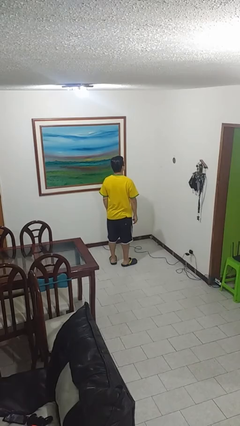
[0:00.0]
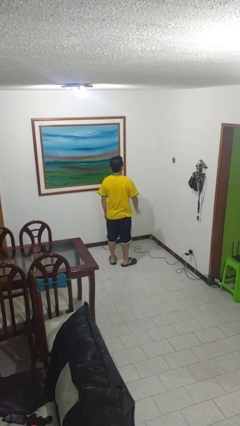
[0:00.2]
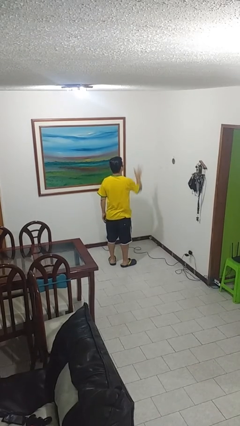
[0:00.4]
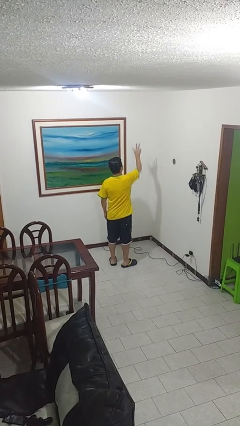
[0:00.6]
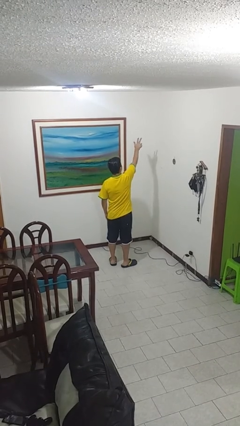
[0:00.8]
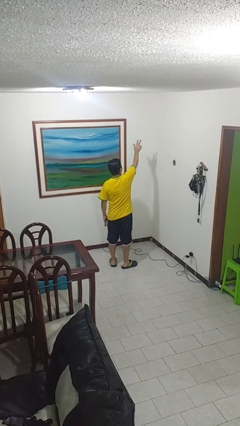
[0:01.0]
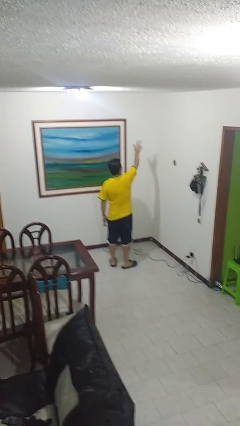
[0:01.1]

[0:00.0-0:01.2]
person gestures number three

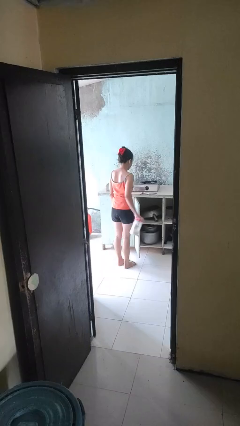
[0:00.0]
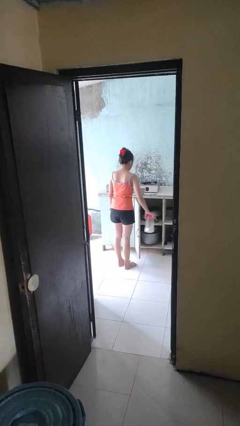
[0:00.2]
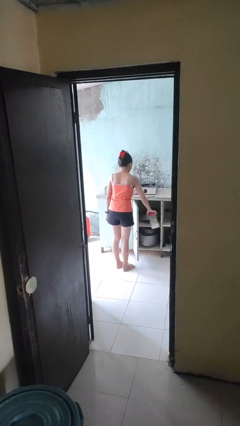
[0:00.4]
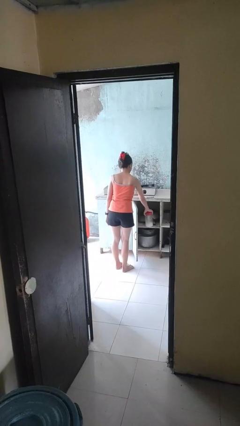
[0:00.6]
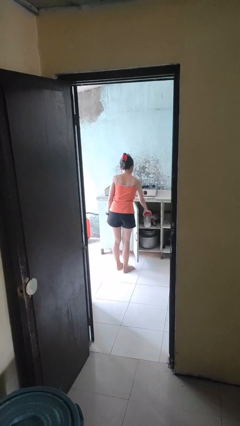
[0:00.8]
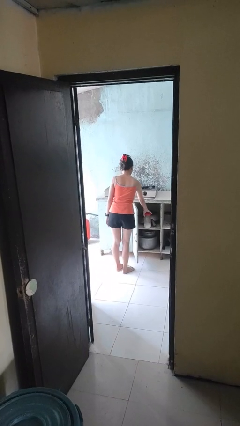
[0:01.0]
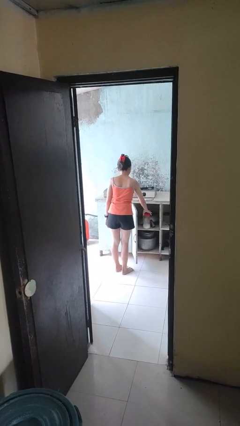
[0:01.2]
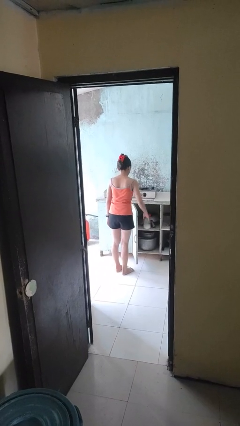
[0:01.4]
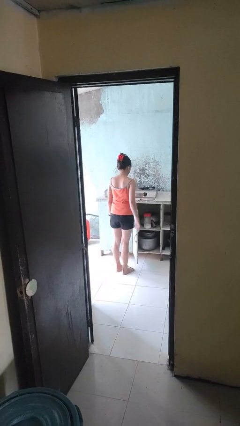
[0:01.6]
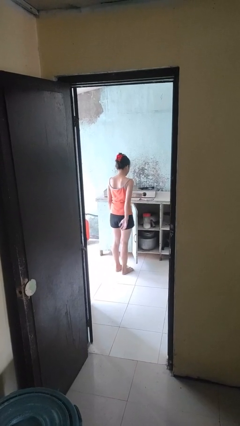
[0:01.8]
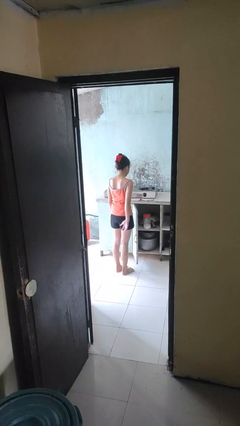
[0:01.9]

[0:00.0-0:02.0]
person puts down object into cabinet

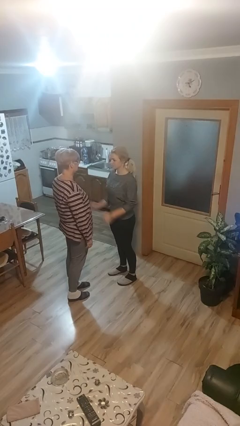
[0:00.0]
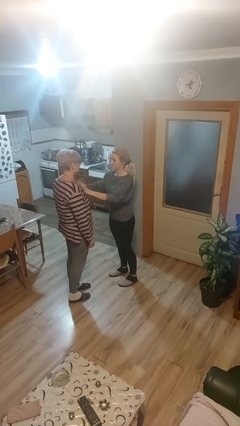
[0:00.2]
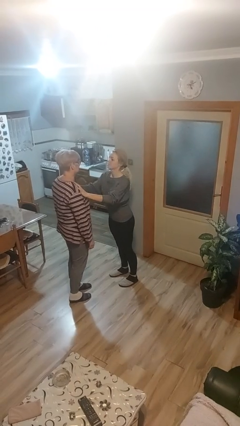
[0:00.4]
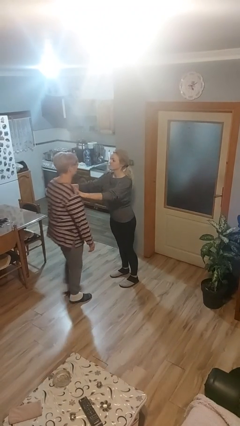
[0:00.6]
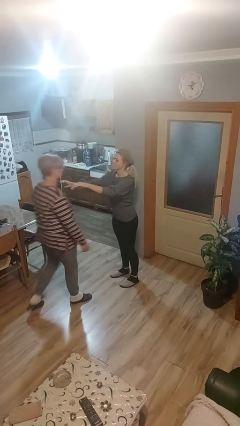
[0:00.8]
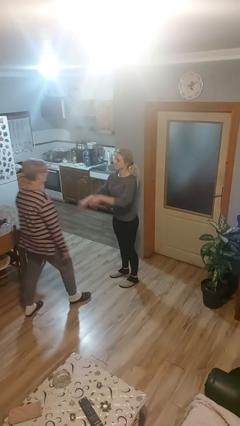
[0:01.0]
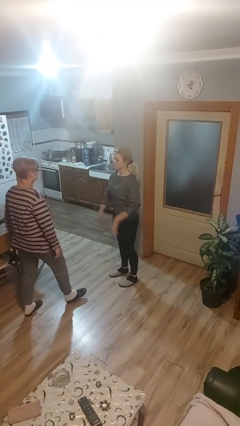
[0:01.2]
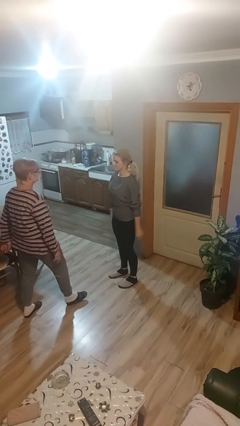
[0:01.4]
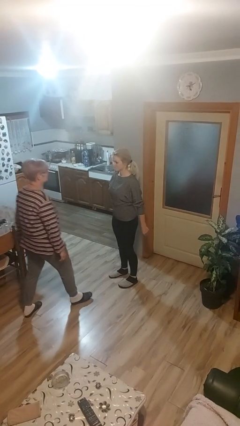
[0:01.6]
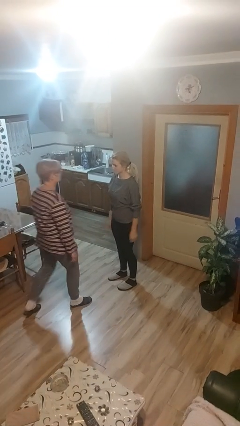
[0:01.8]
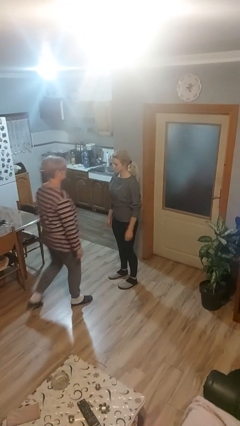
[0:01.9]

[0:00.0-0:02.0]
person shoves person

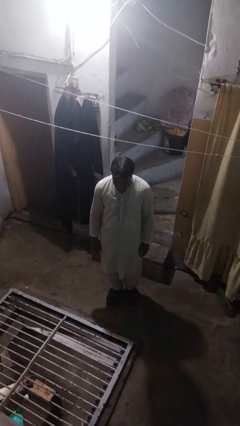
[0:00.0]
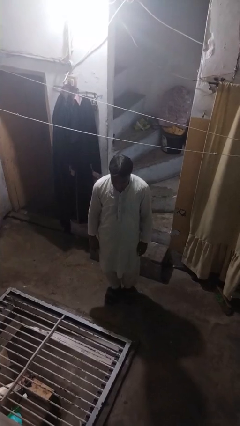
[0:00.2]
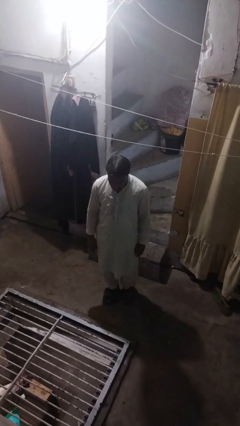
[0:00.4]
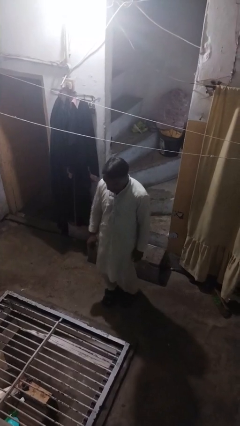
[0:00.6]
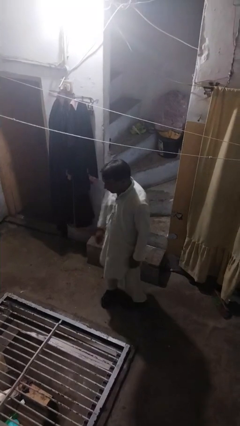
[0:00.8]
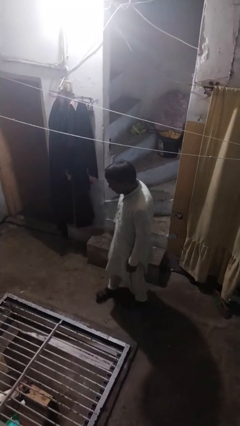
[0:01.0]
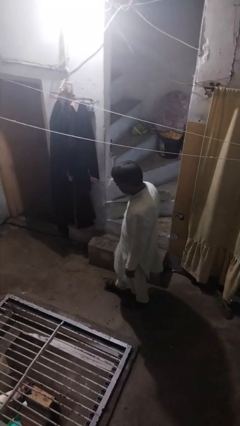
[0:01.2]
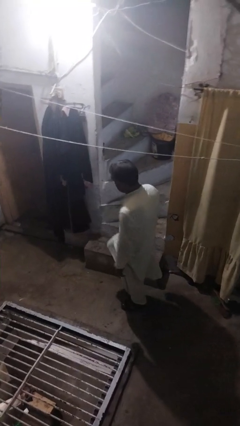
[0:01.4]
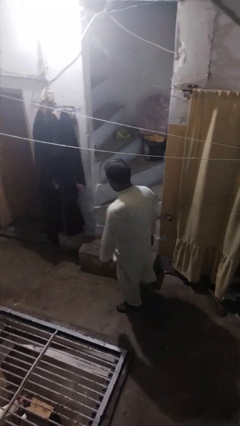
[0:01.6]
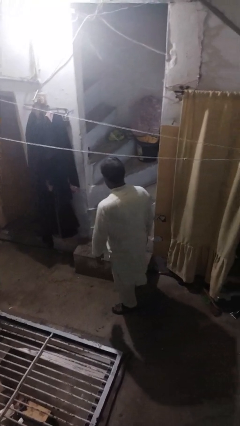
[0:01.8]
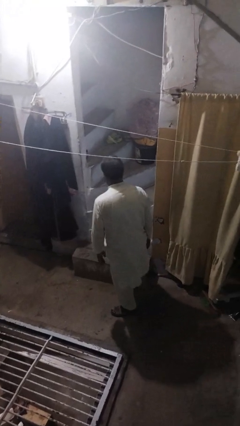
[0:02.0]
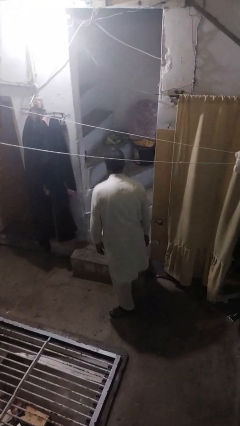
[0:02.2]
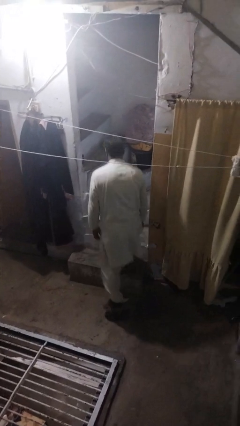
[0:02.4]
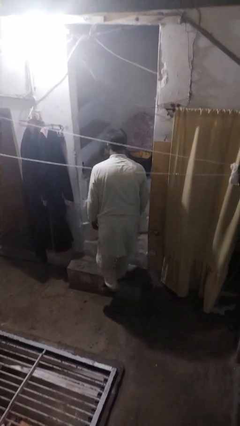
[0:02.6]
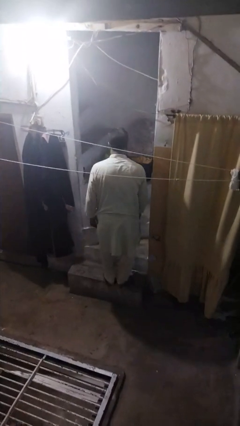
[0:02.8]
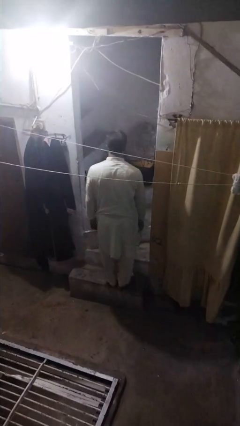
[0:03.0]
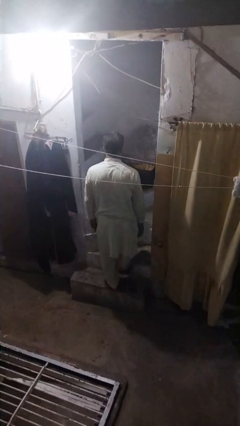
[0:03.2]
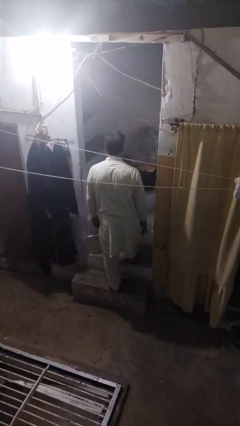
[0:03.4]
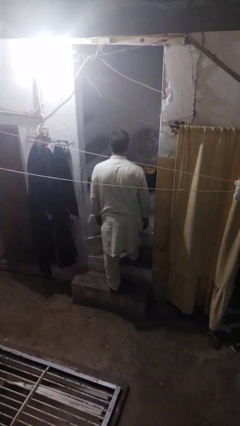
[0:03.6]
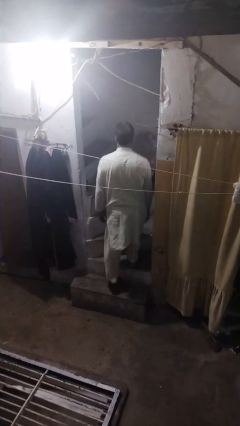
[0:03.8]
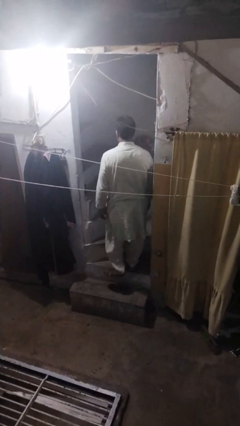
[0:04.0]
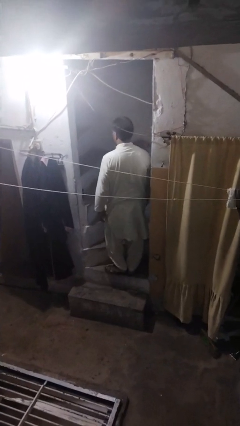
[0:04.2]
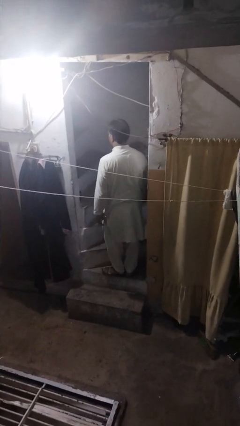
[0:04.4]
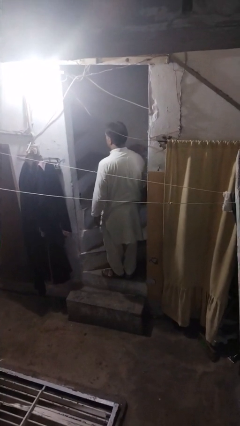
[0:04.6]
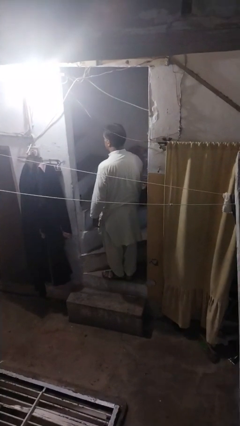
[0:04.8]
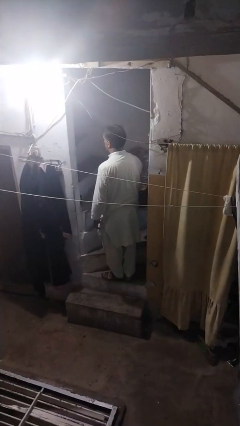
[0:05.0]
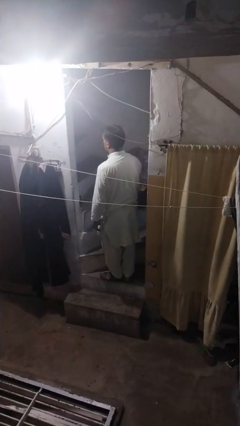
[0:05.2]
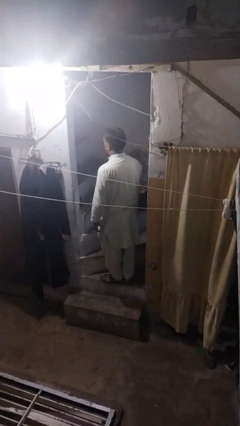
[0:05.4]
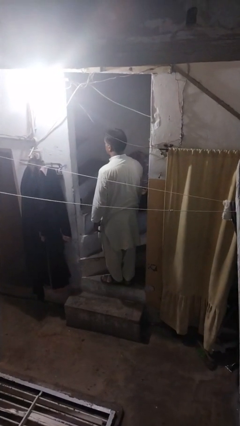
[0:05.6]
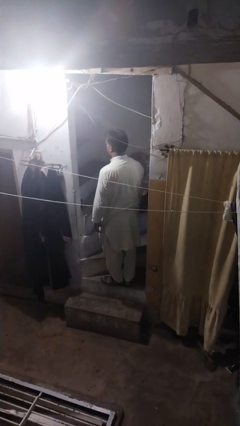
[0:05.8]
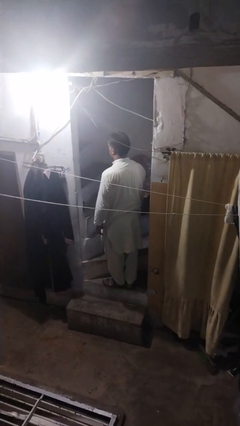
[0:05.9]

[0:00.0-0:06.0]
person climbs up stairs

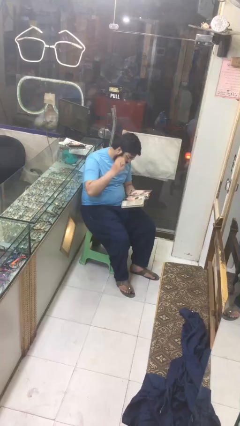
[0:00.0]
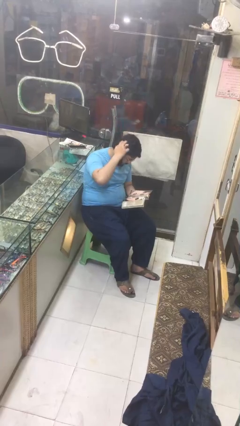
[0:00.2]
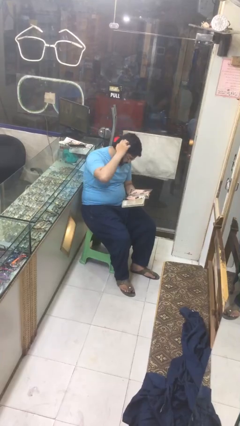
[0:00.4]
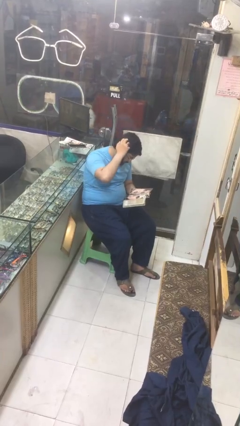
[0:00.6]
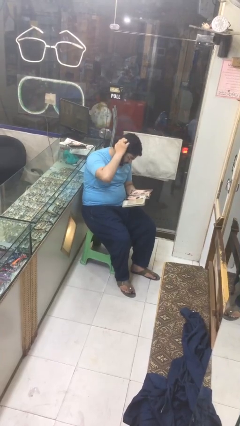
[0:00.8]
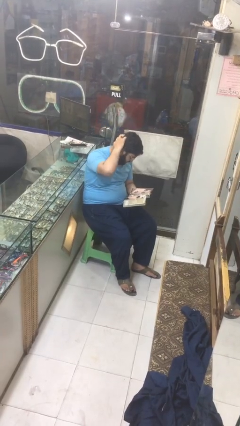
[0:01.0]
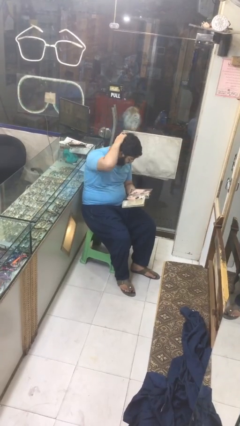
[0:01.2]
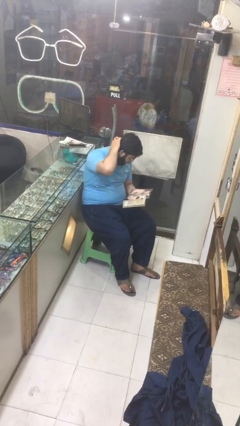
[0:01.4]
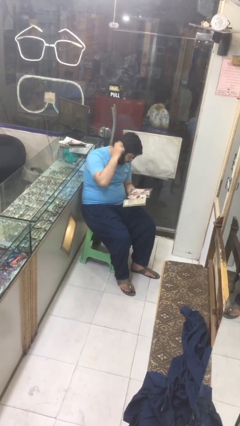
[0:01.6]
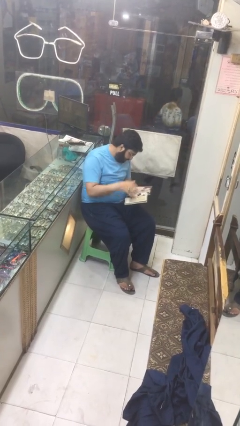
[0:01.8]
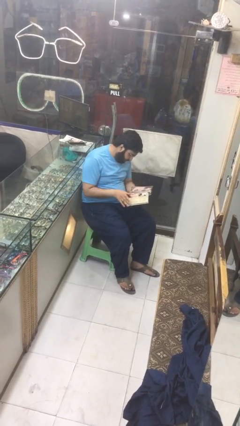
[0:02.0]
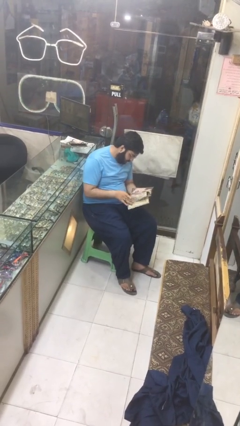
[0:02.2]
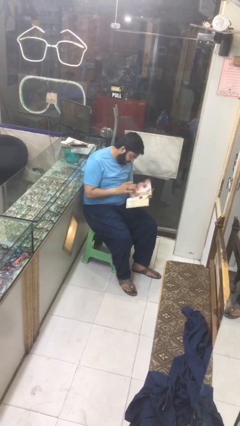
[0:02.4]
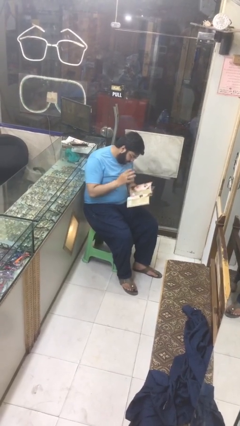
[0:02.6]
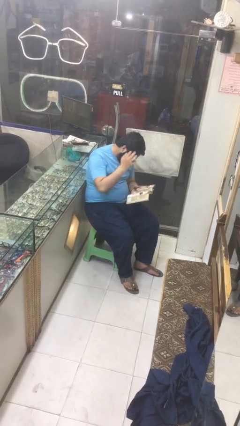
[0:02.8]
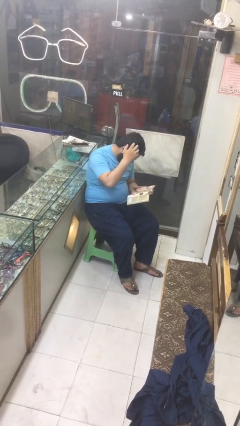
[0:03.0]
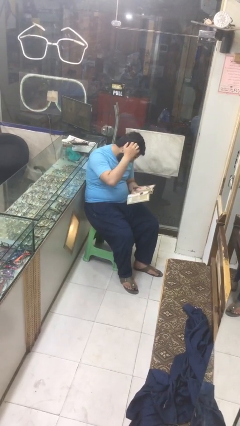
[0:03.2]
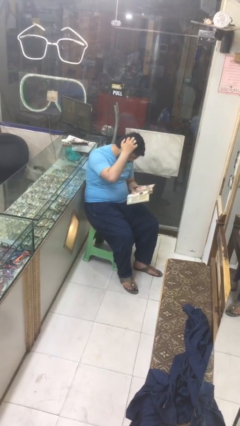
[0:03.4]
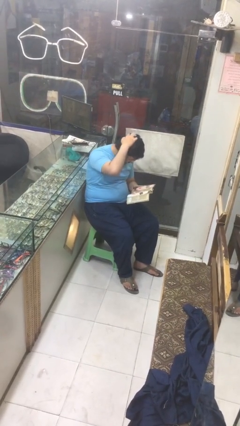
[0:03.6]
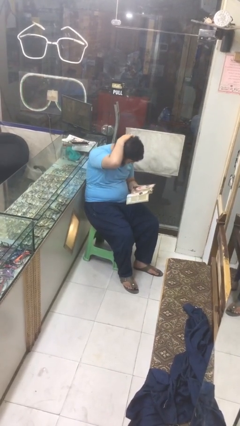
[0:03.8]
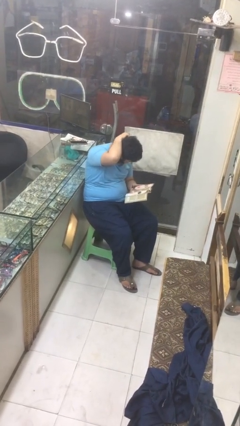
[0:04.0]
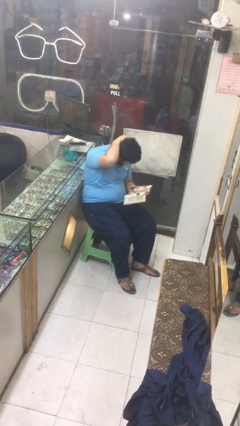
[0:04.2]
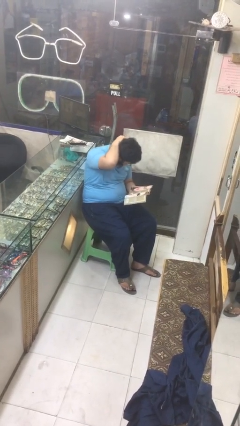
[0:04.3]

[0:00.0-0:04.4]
person reads document

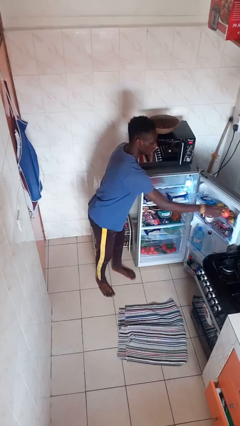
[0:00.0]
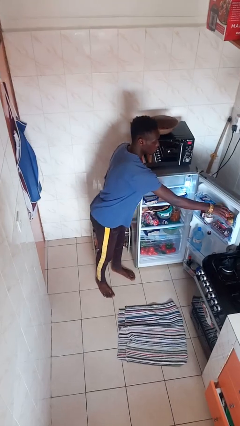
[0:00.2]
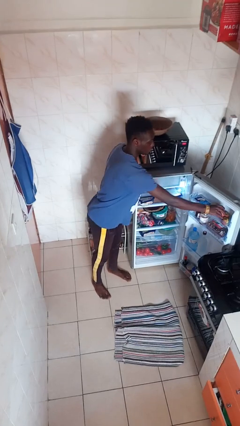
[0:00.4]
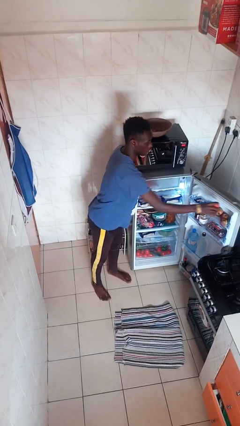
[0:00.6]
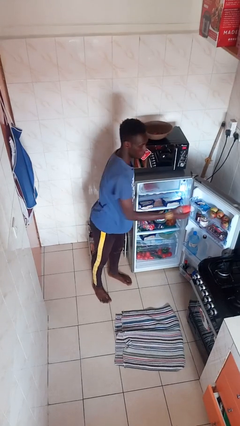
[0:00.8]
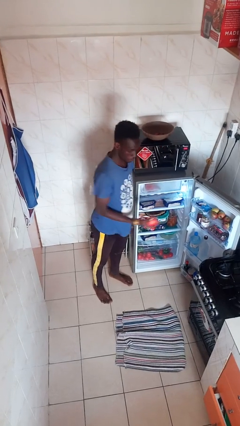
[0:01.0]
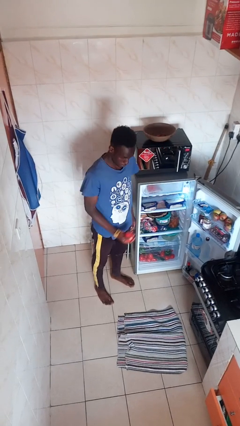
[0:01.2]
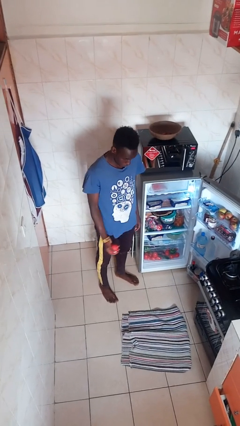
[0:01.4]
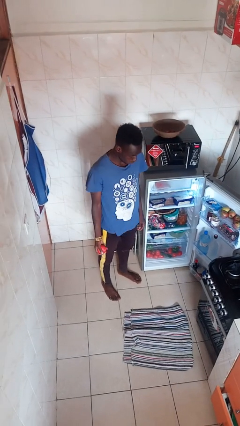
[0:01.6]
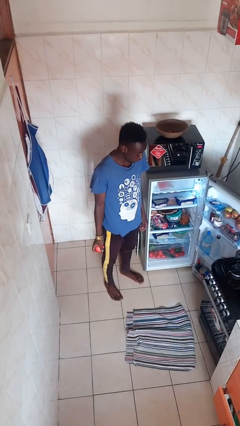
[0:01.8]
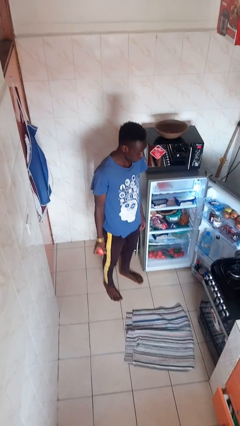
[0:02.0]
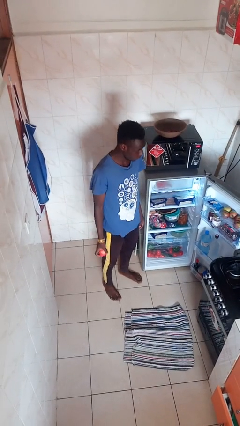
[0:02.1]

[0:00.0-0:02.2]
person takes object from refrigerator
